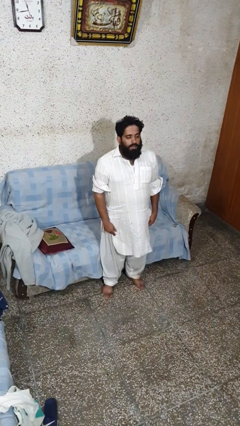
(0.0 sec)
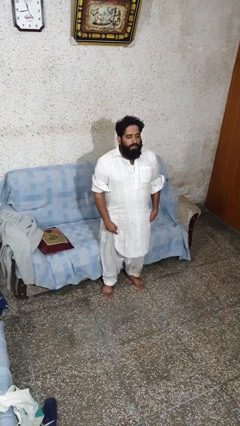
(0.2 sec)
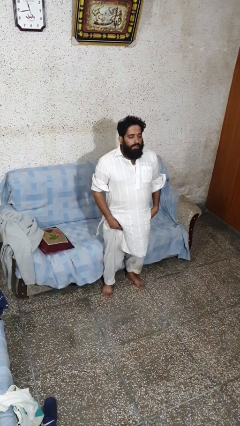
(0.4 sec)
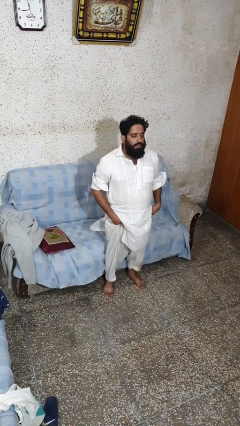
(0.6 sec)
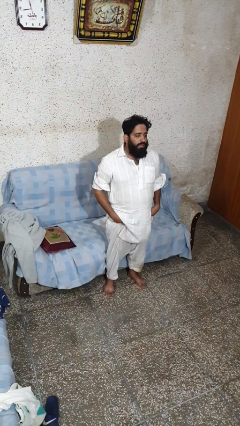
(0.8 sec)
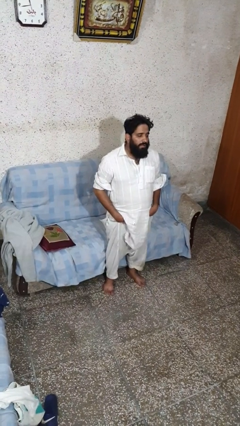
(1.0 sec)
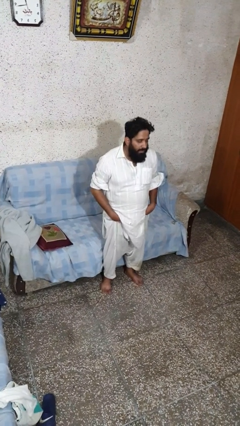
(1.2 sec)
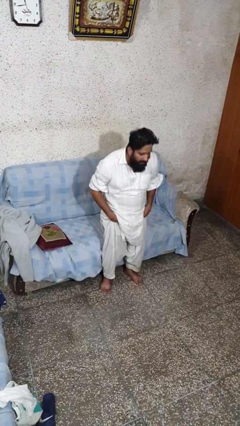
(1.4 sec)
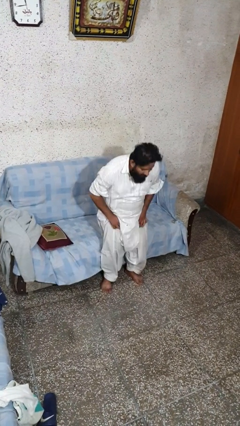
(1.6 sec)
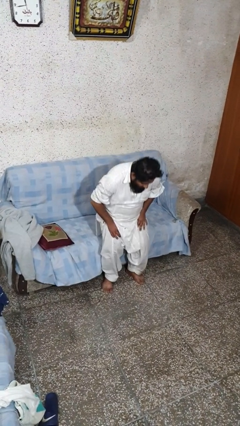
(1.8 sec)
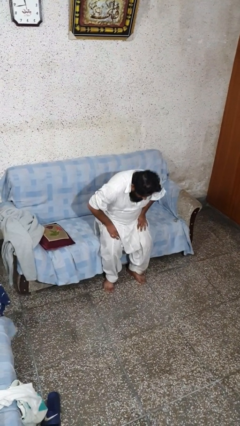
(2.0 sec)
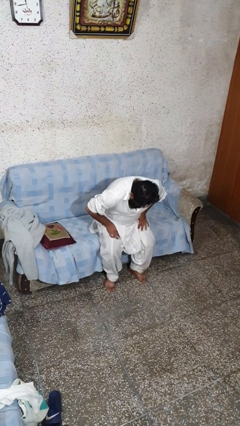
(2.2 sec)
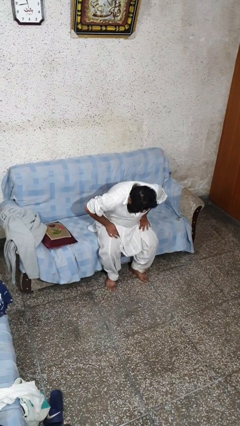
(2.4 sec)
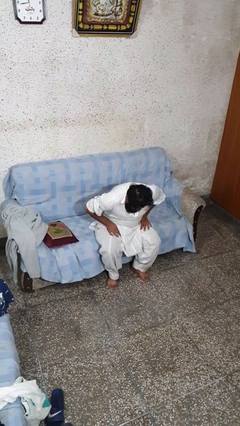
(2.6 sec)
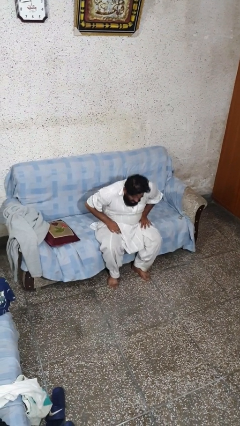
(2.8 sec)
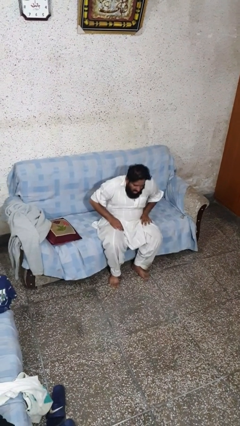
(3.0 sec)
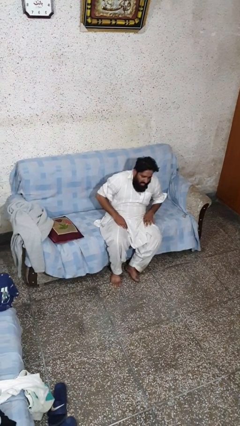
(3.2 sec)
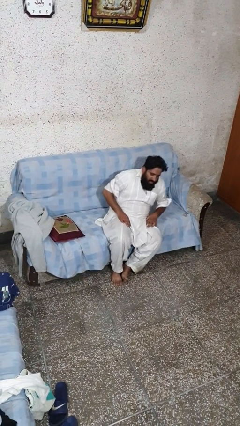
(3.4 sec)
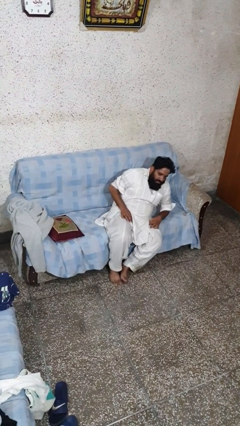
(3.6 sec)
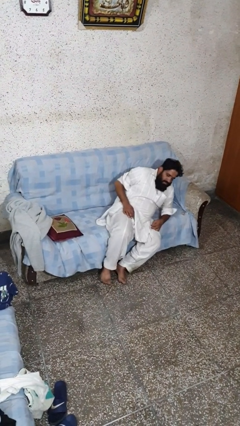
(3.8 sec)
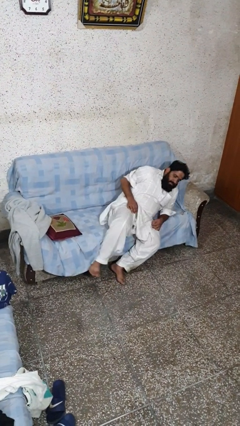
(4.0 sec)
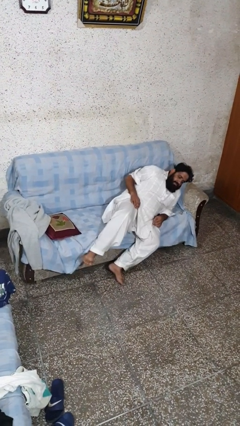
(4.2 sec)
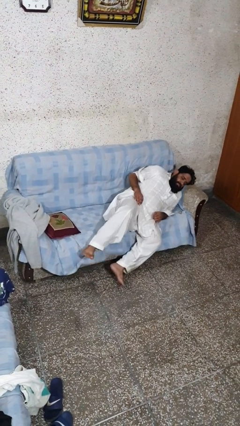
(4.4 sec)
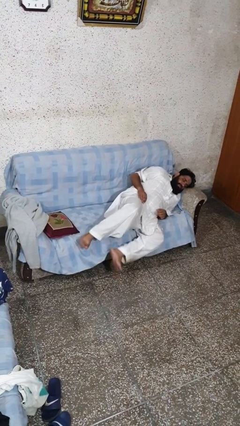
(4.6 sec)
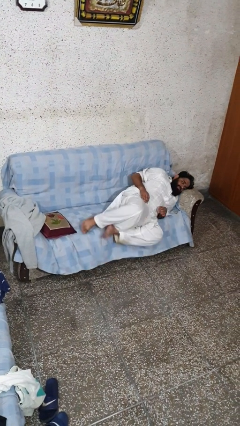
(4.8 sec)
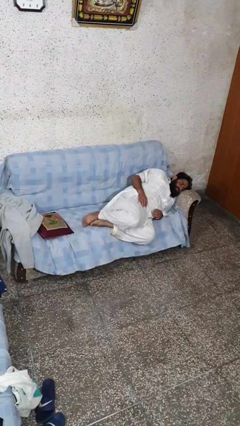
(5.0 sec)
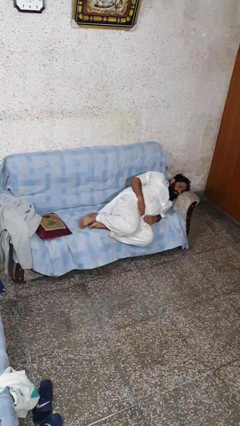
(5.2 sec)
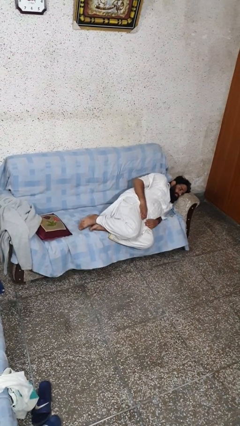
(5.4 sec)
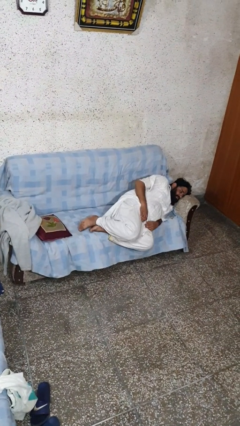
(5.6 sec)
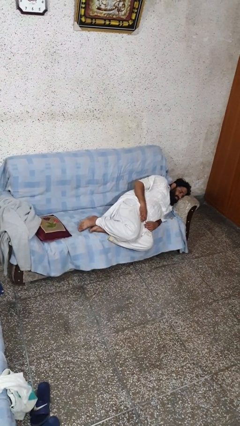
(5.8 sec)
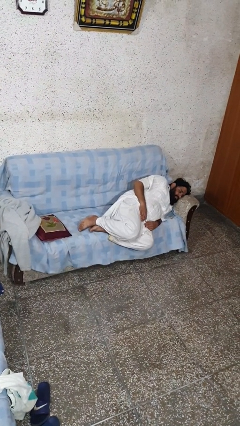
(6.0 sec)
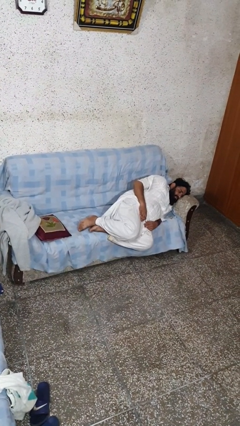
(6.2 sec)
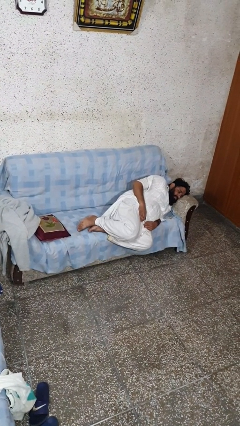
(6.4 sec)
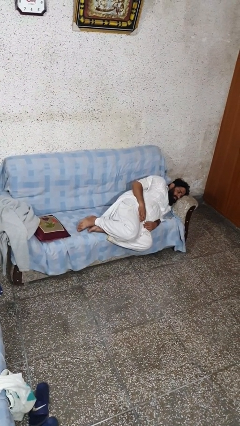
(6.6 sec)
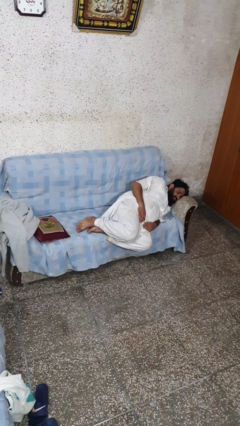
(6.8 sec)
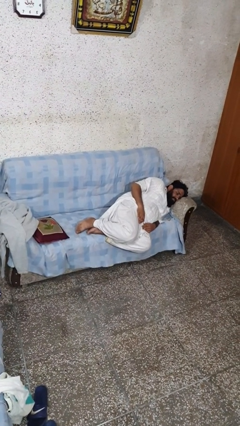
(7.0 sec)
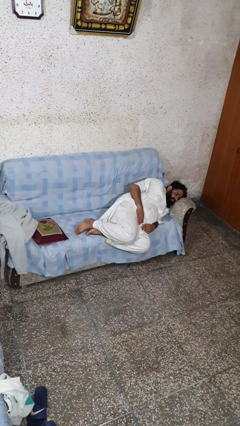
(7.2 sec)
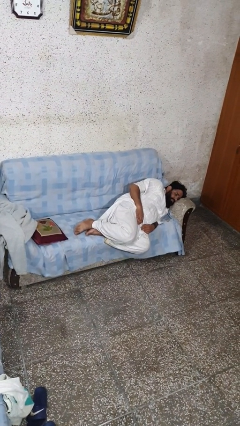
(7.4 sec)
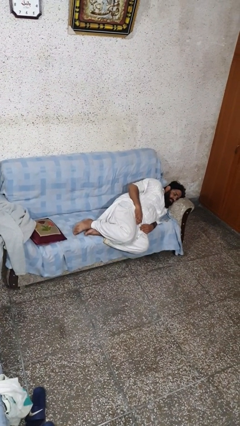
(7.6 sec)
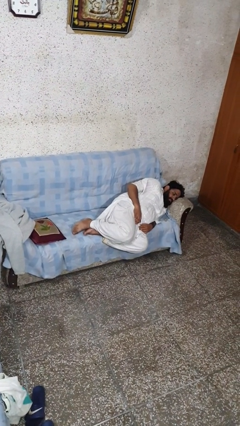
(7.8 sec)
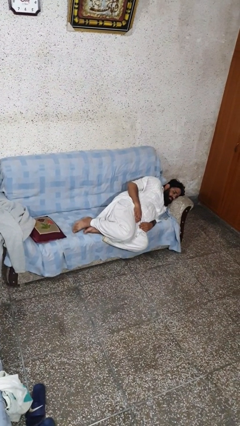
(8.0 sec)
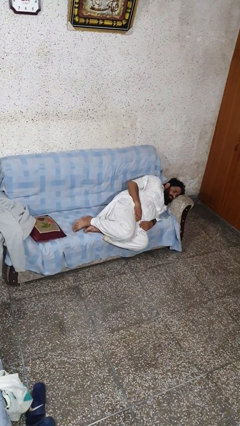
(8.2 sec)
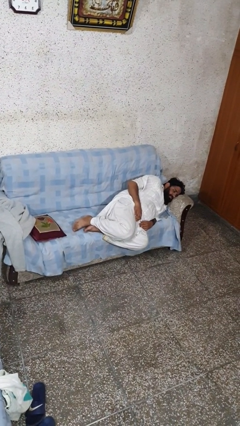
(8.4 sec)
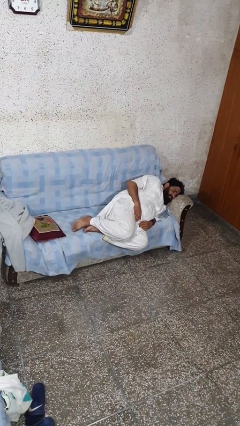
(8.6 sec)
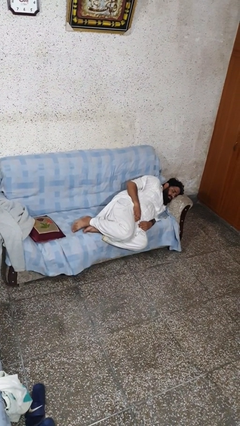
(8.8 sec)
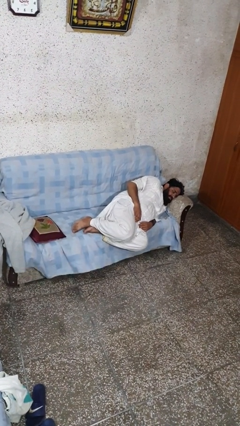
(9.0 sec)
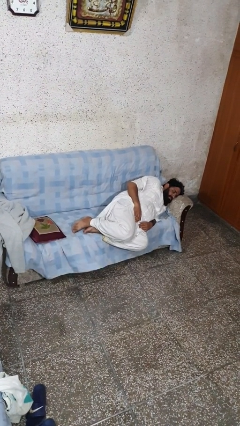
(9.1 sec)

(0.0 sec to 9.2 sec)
person lies down on couch

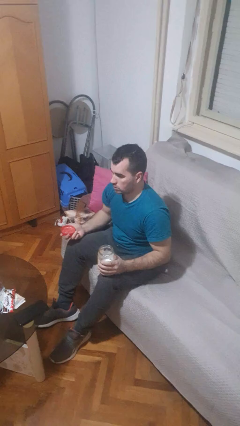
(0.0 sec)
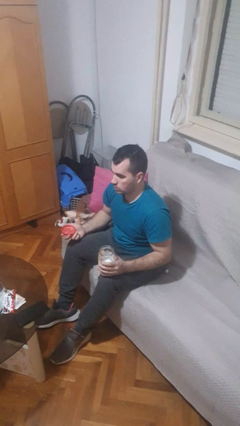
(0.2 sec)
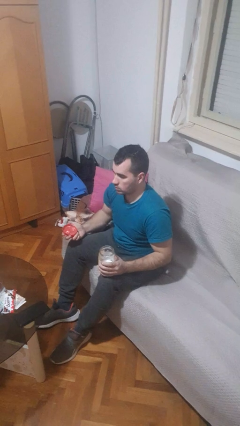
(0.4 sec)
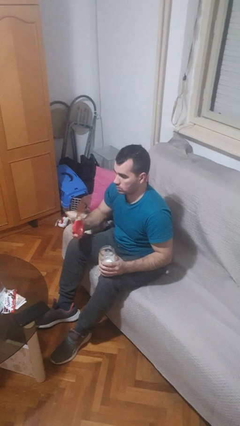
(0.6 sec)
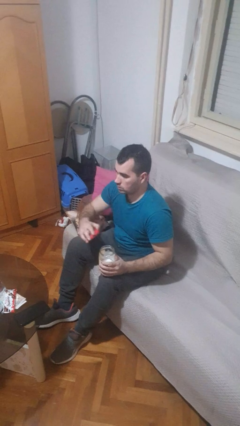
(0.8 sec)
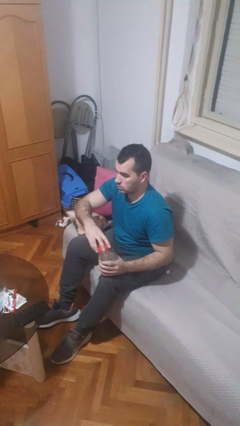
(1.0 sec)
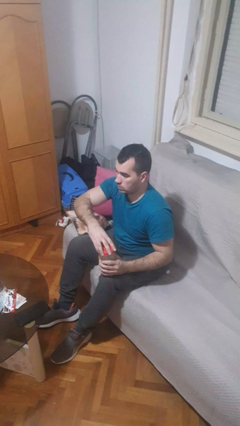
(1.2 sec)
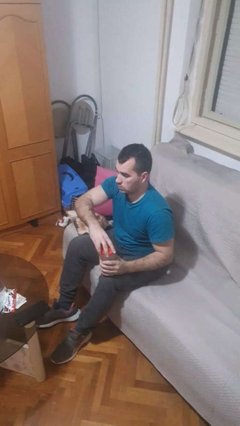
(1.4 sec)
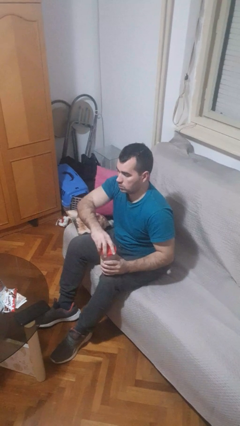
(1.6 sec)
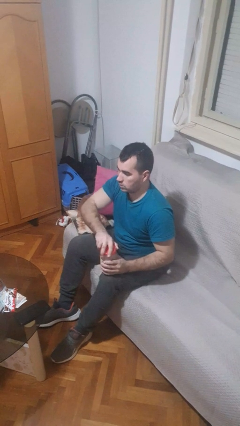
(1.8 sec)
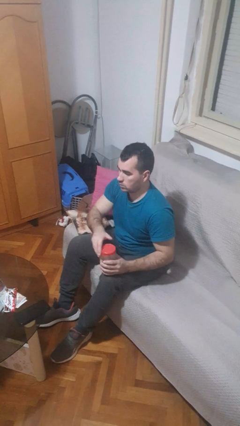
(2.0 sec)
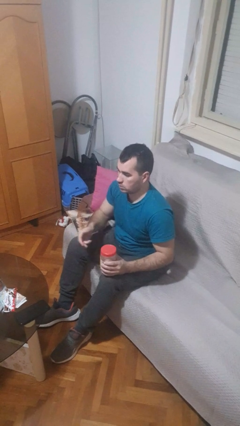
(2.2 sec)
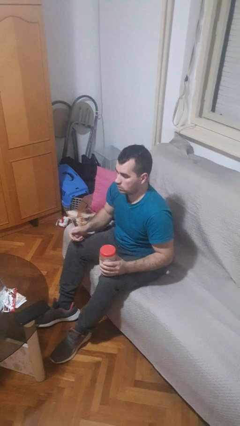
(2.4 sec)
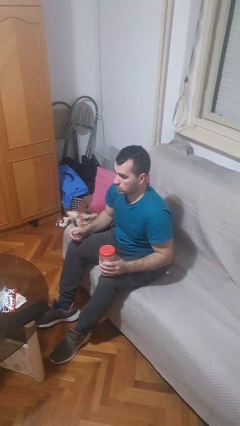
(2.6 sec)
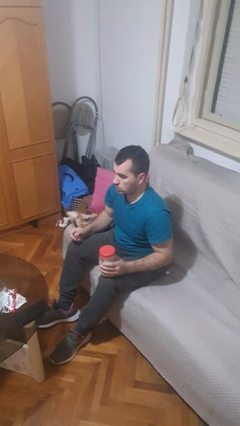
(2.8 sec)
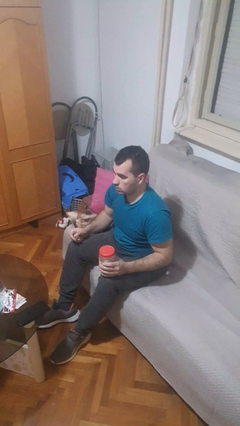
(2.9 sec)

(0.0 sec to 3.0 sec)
person closes jar

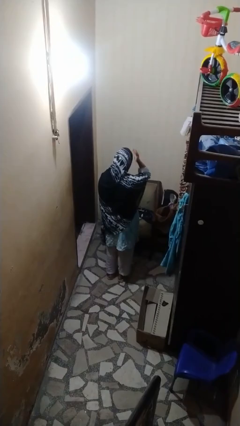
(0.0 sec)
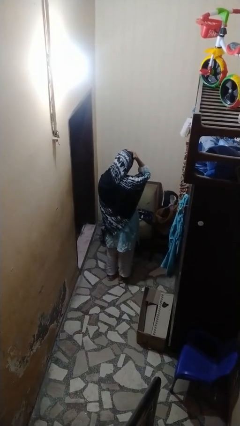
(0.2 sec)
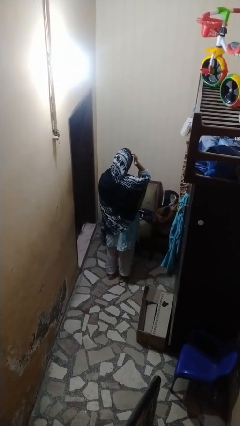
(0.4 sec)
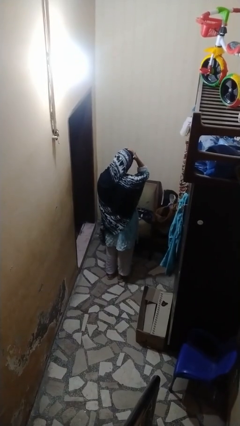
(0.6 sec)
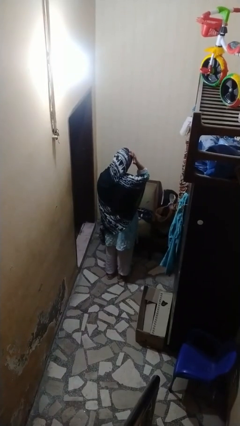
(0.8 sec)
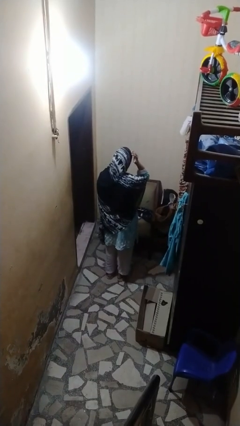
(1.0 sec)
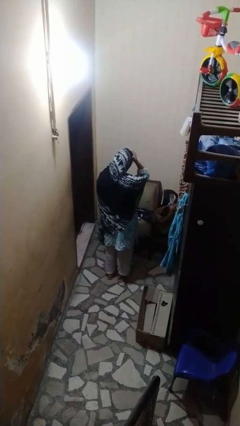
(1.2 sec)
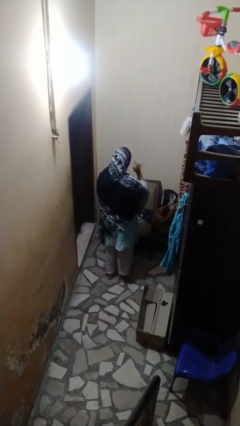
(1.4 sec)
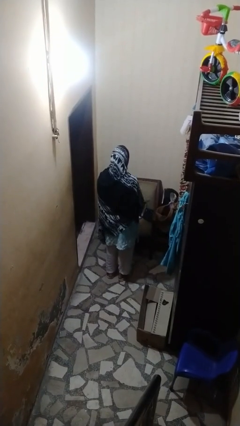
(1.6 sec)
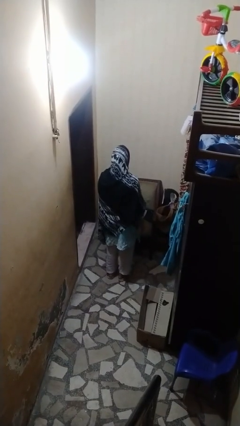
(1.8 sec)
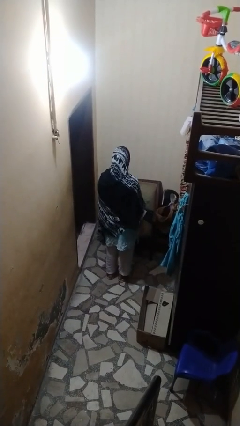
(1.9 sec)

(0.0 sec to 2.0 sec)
person pats head

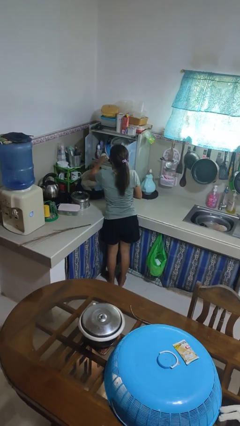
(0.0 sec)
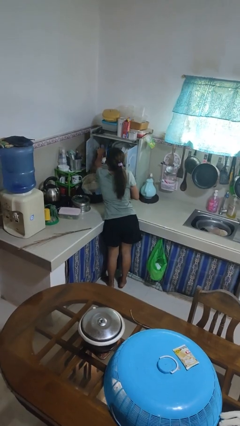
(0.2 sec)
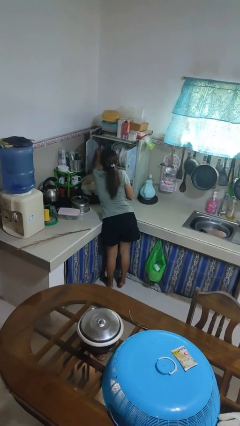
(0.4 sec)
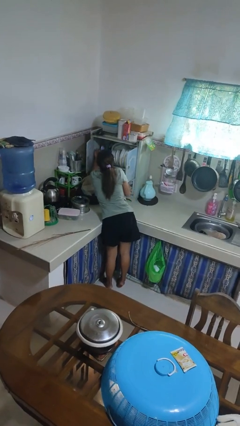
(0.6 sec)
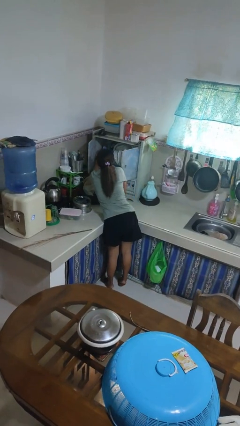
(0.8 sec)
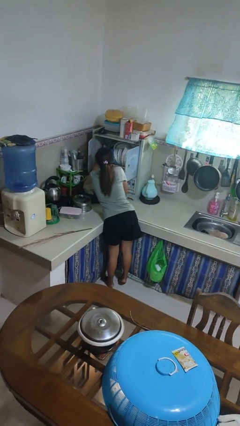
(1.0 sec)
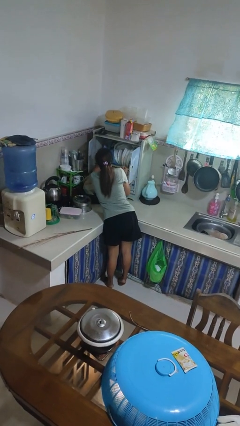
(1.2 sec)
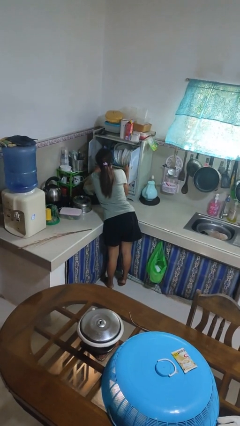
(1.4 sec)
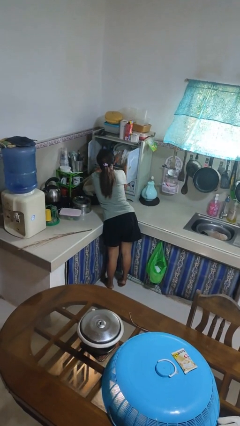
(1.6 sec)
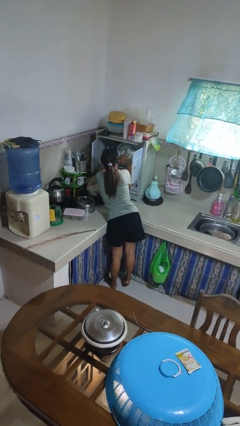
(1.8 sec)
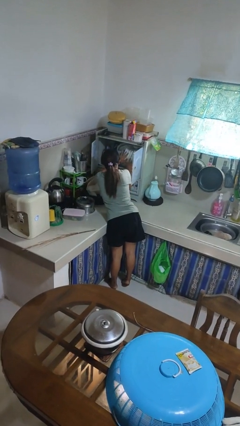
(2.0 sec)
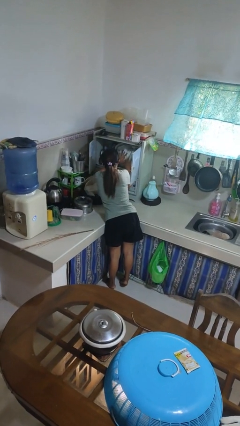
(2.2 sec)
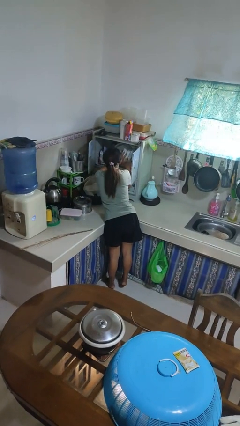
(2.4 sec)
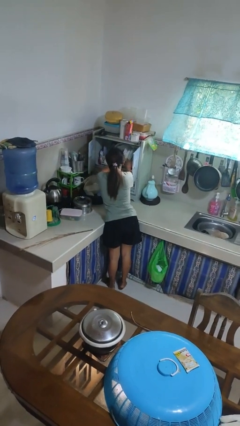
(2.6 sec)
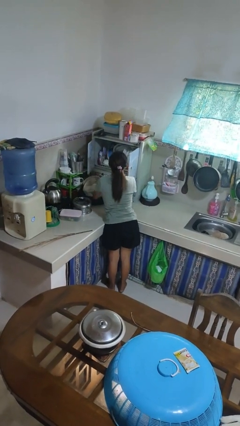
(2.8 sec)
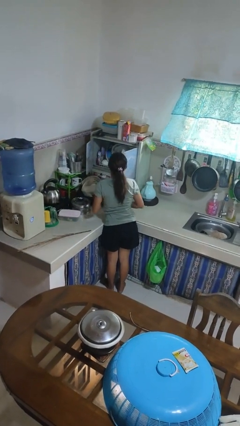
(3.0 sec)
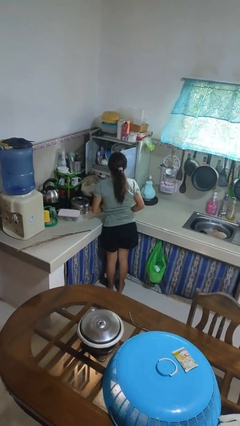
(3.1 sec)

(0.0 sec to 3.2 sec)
person searches in kitchen drawer
